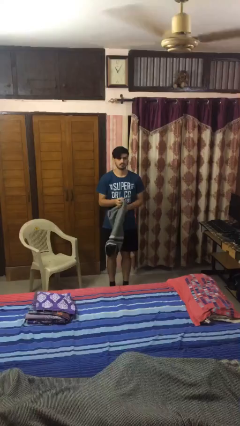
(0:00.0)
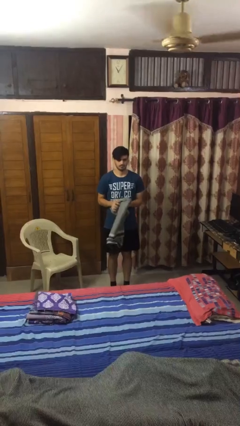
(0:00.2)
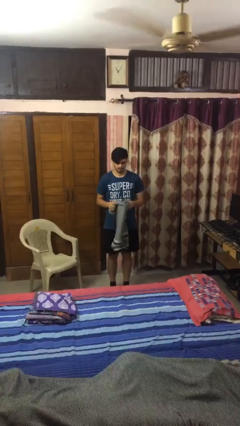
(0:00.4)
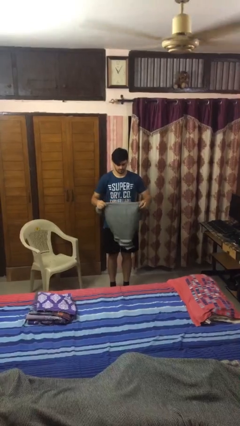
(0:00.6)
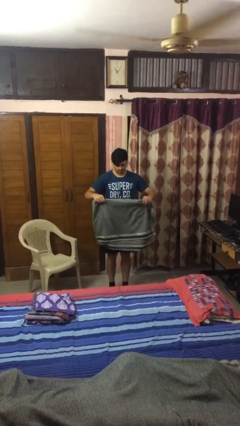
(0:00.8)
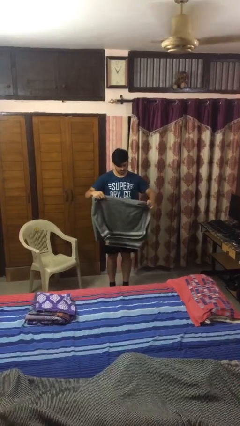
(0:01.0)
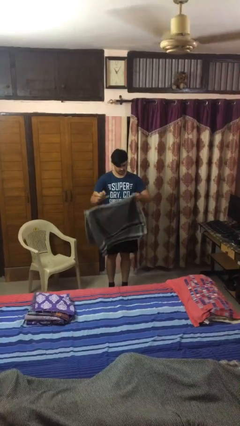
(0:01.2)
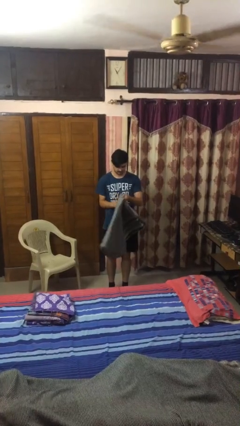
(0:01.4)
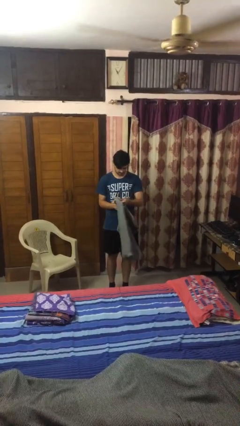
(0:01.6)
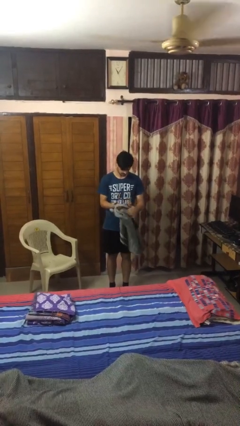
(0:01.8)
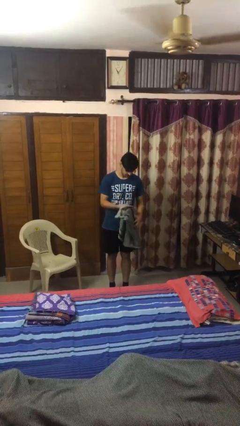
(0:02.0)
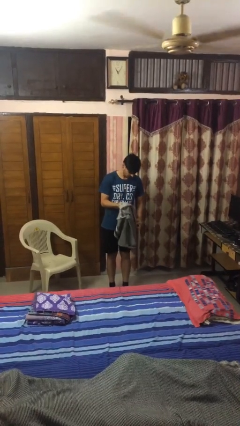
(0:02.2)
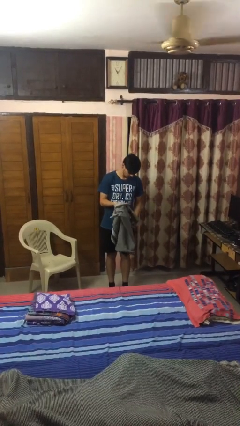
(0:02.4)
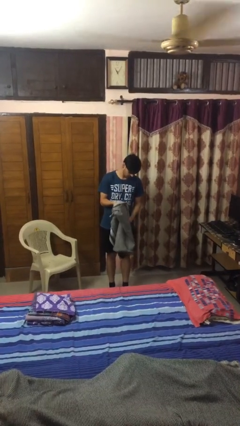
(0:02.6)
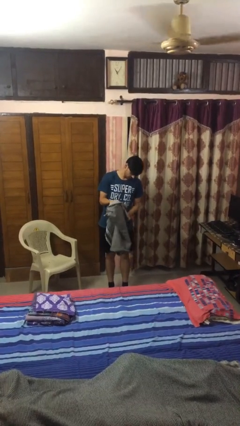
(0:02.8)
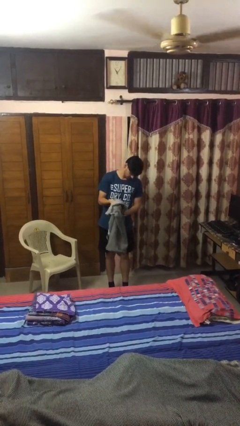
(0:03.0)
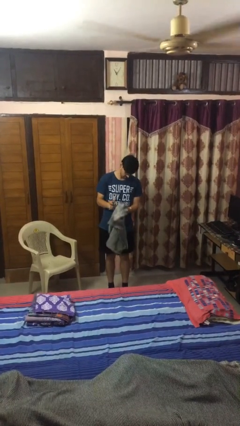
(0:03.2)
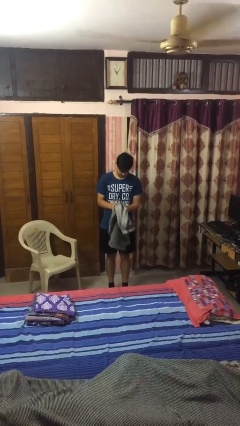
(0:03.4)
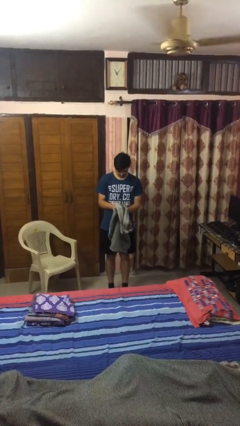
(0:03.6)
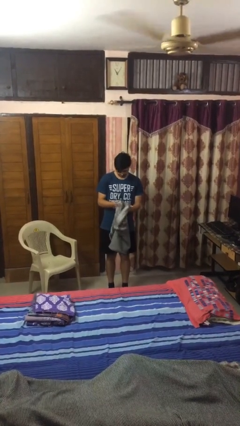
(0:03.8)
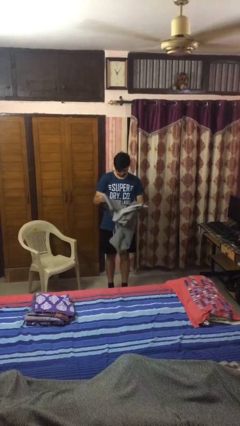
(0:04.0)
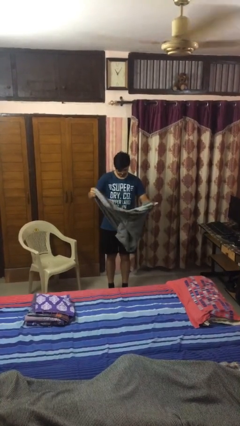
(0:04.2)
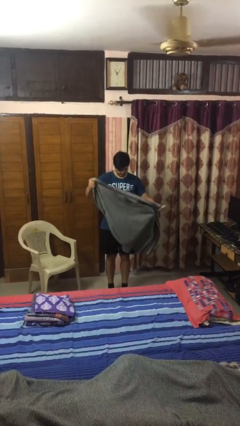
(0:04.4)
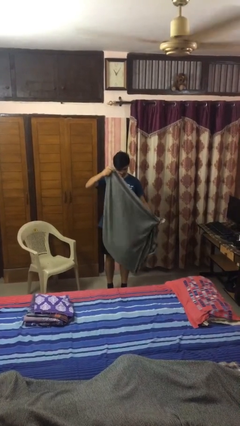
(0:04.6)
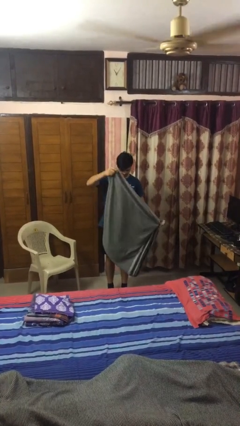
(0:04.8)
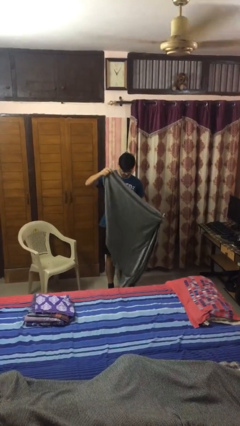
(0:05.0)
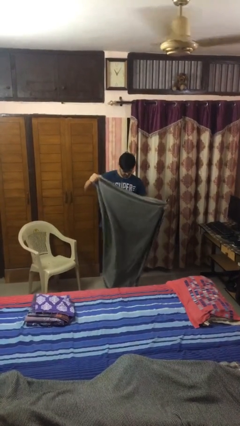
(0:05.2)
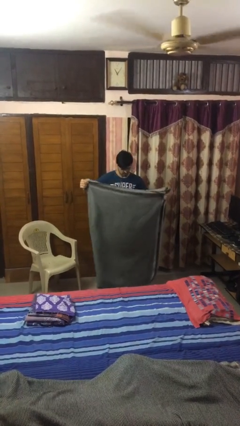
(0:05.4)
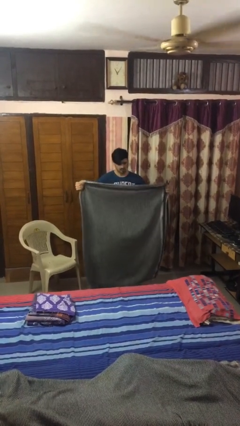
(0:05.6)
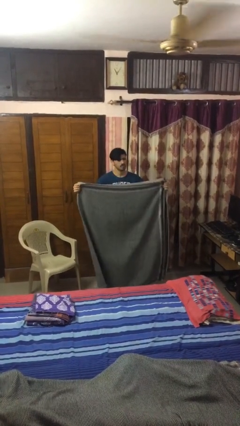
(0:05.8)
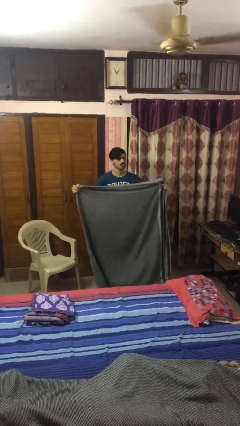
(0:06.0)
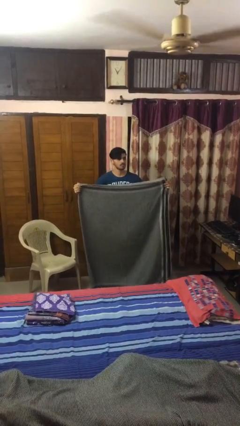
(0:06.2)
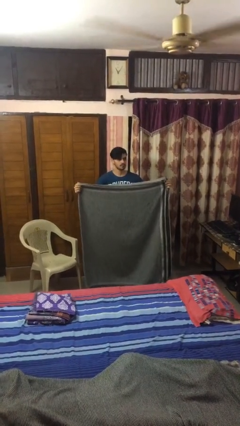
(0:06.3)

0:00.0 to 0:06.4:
person unfolds blanket

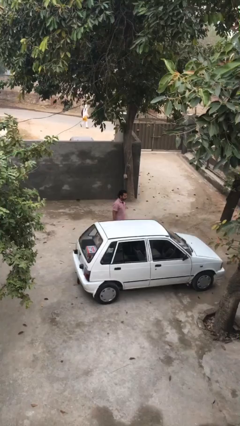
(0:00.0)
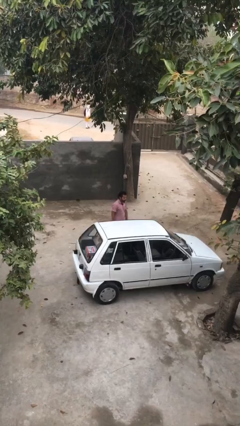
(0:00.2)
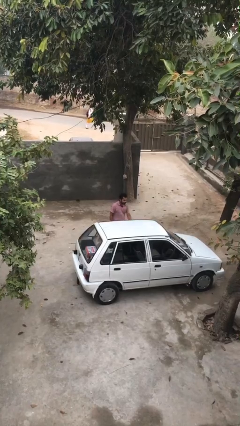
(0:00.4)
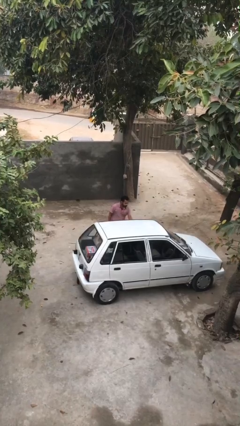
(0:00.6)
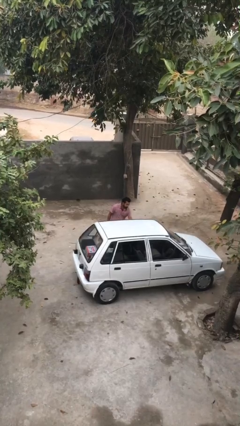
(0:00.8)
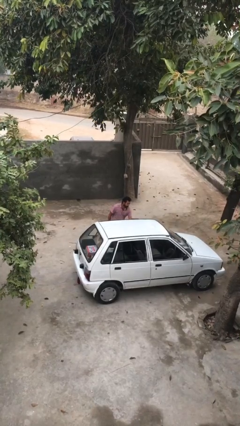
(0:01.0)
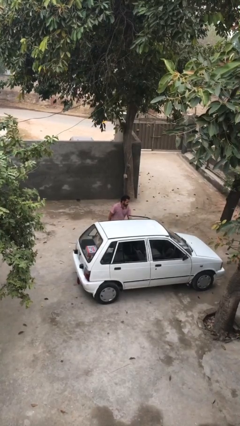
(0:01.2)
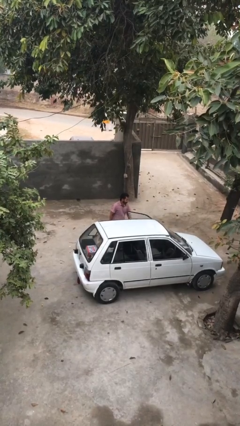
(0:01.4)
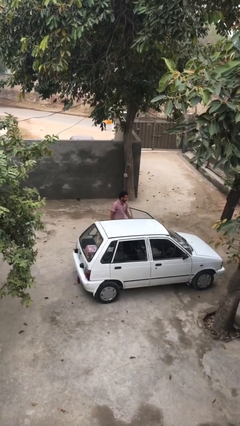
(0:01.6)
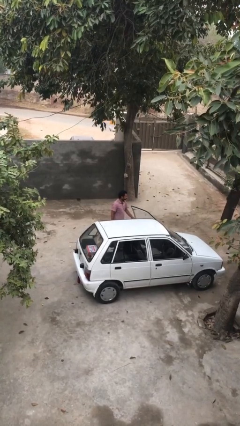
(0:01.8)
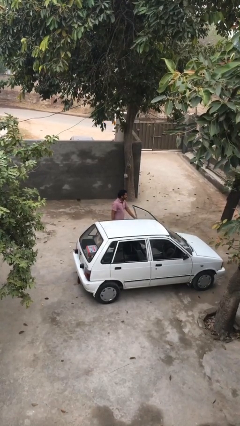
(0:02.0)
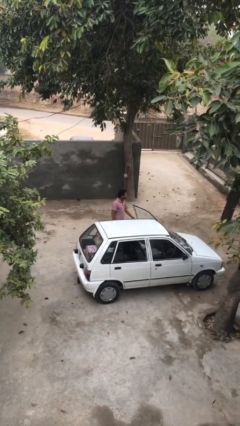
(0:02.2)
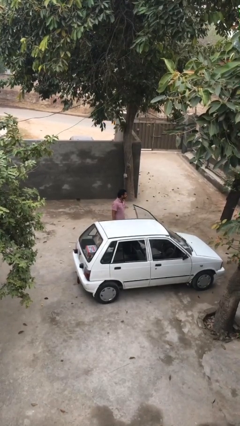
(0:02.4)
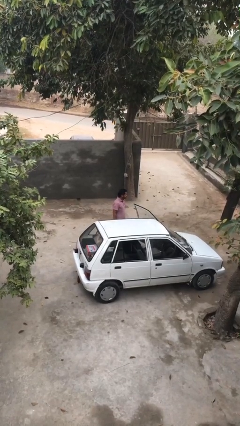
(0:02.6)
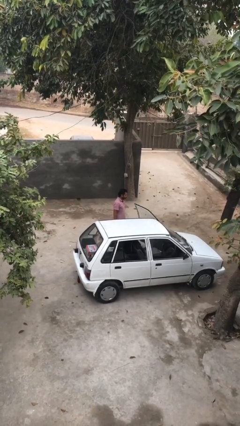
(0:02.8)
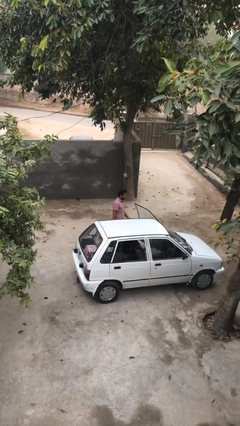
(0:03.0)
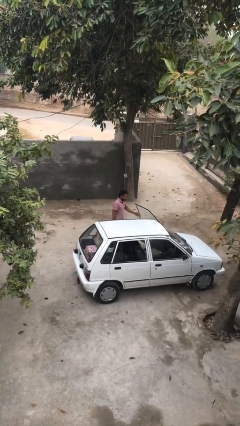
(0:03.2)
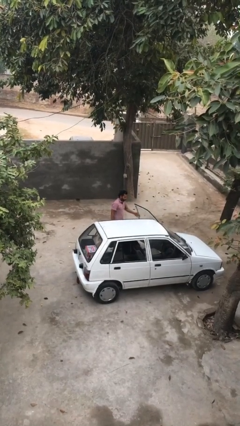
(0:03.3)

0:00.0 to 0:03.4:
person opens car door

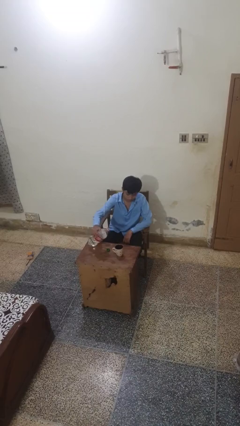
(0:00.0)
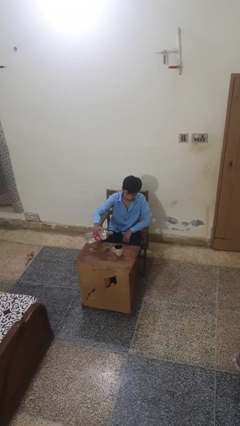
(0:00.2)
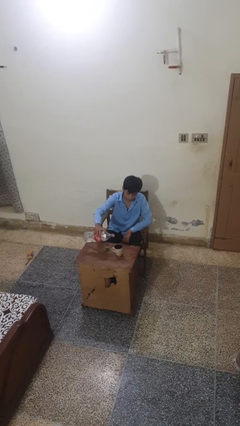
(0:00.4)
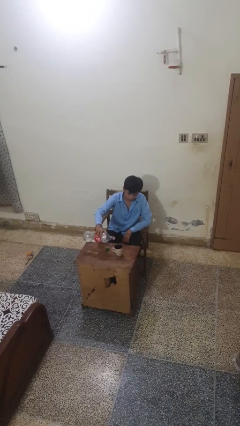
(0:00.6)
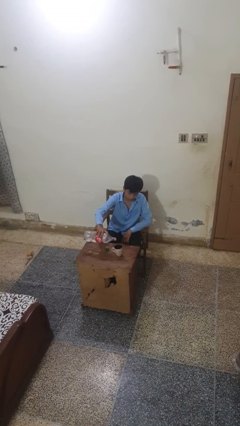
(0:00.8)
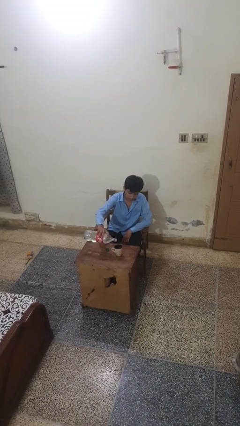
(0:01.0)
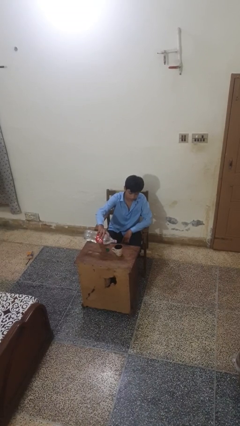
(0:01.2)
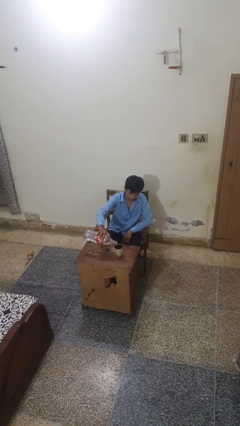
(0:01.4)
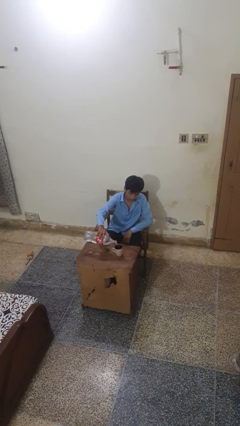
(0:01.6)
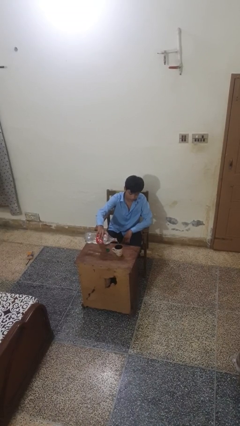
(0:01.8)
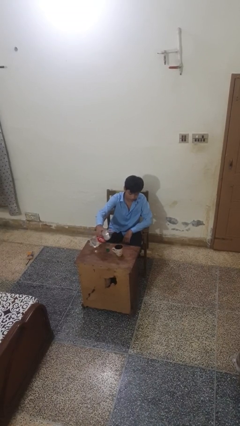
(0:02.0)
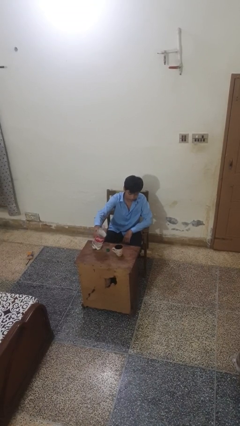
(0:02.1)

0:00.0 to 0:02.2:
person pours liquid into cup

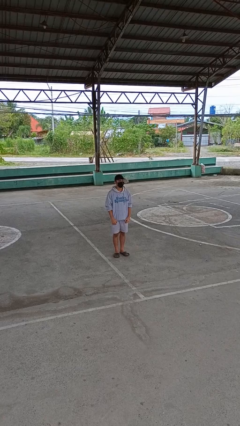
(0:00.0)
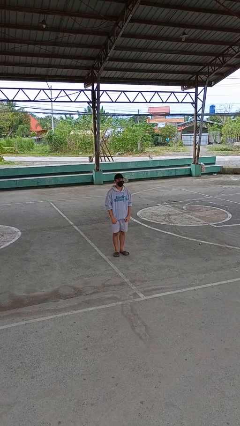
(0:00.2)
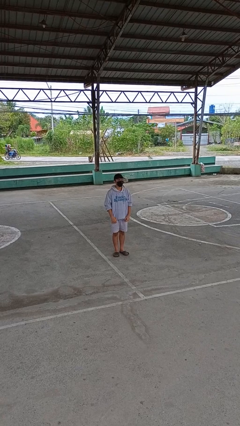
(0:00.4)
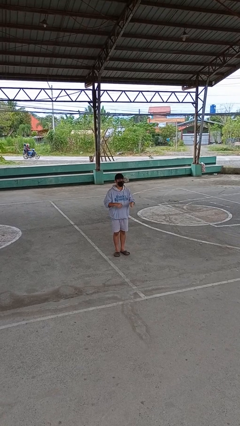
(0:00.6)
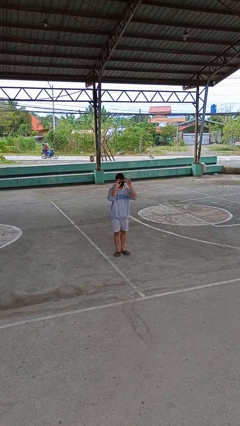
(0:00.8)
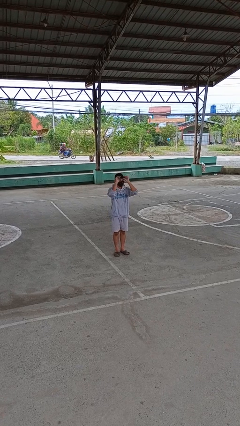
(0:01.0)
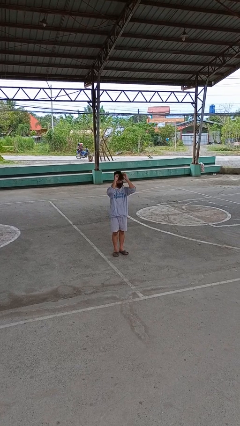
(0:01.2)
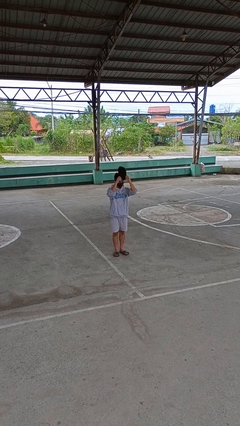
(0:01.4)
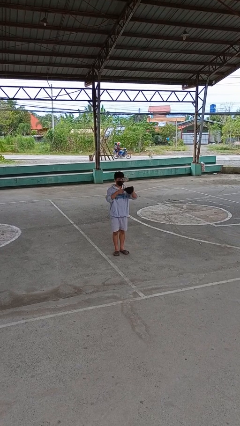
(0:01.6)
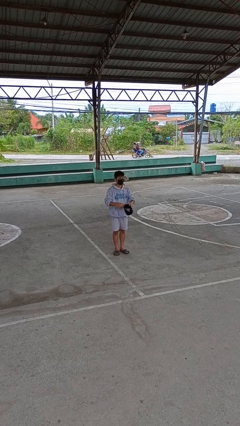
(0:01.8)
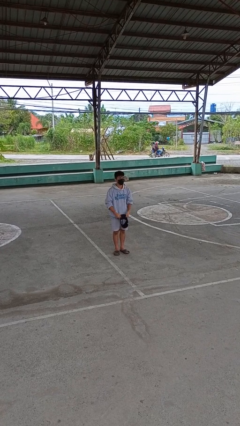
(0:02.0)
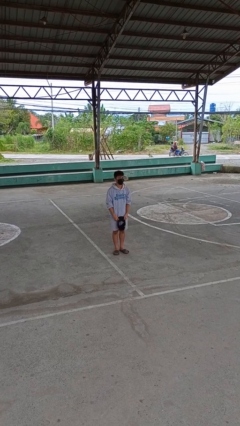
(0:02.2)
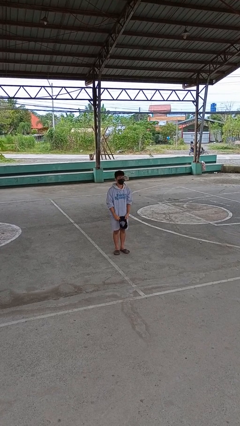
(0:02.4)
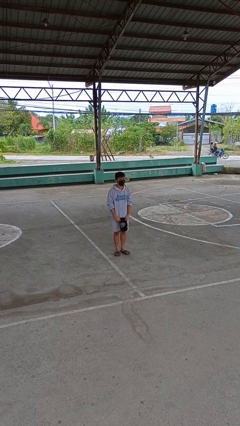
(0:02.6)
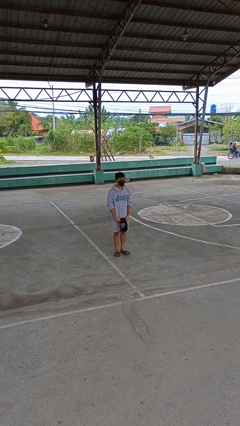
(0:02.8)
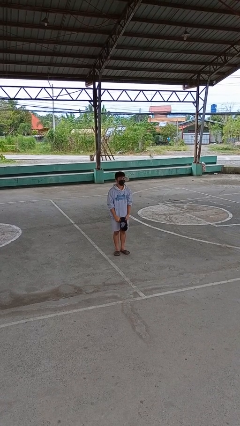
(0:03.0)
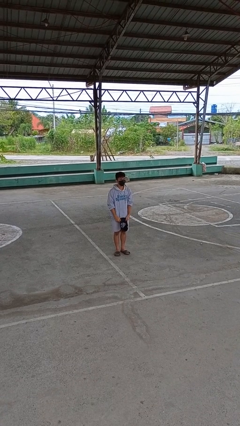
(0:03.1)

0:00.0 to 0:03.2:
person takes off hat

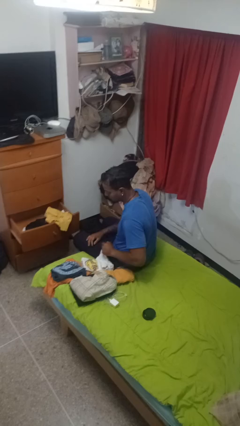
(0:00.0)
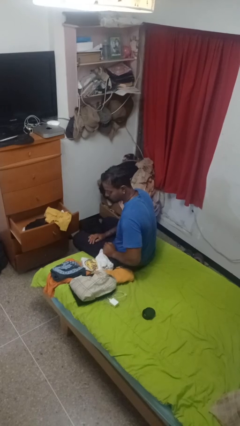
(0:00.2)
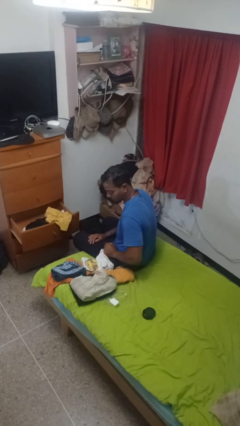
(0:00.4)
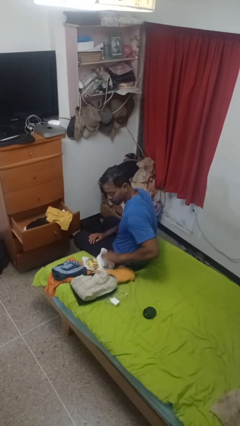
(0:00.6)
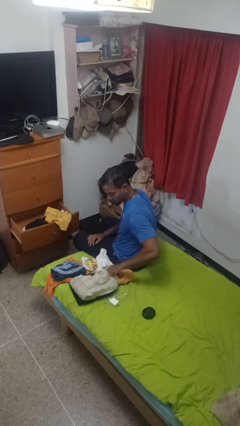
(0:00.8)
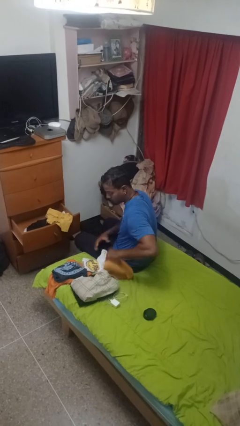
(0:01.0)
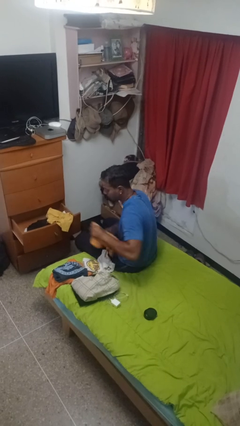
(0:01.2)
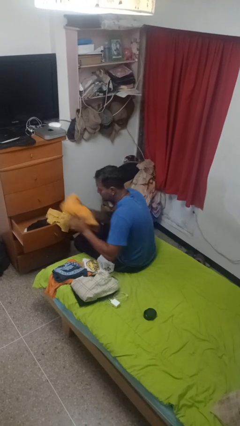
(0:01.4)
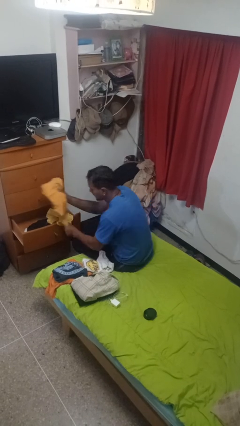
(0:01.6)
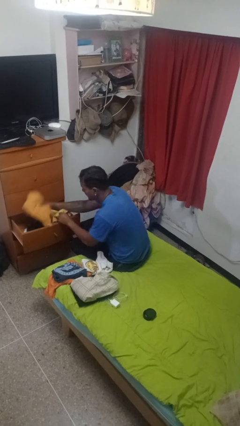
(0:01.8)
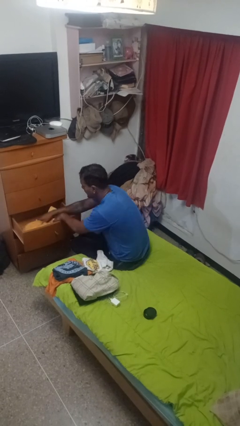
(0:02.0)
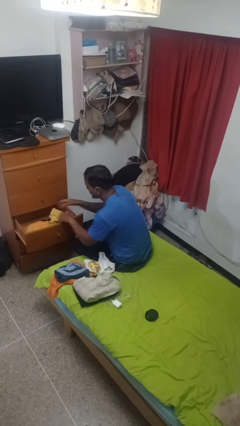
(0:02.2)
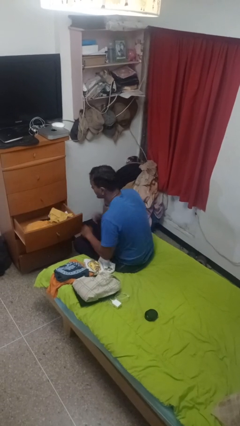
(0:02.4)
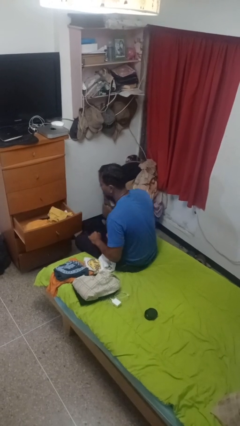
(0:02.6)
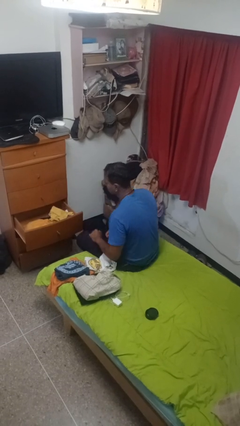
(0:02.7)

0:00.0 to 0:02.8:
person puts clothes into dresser
